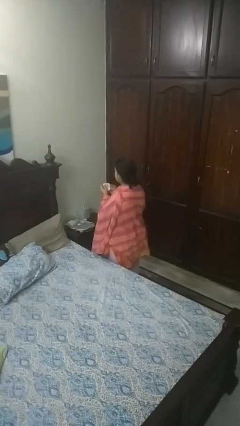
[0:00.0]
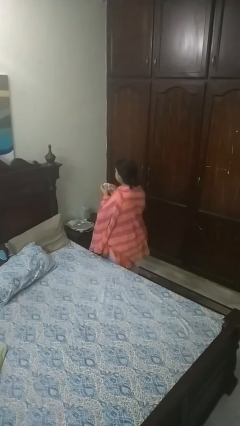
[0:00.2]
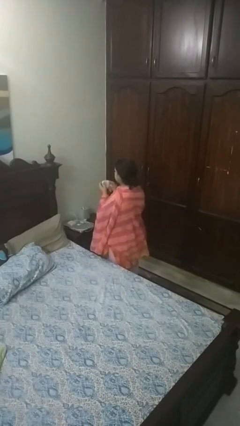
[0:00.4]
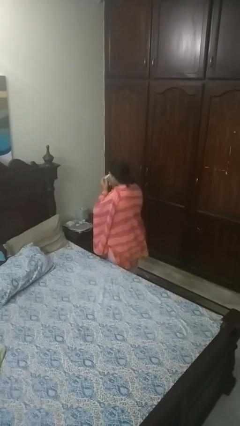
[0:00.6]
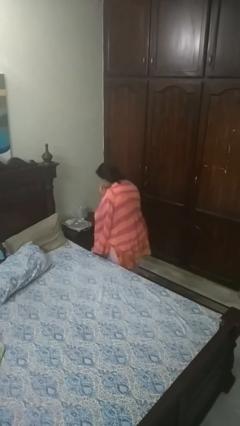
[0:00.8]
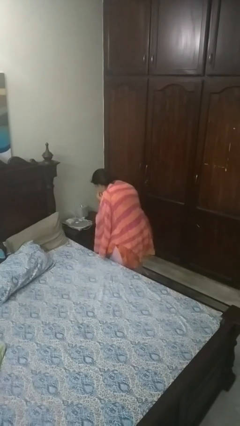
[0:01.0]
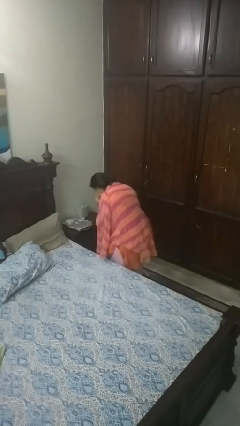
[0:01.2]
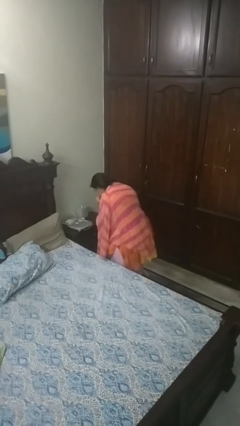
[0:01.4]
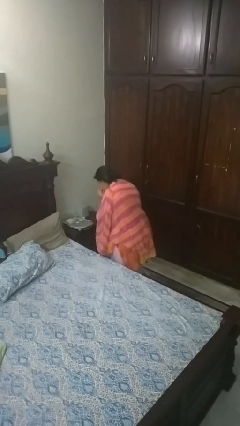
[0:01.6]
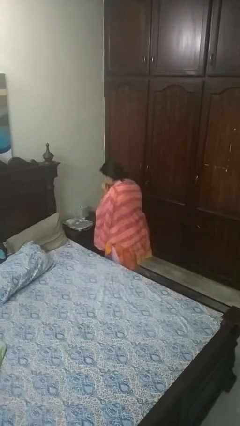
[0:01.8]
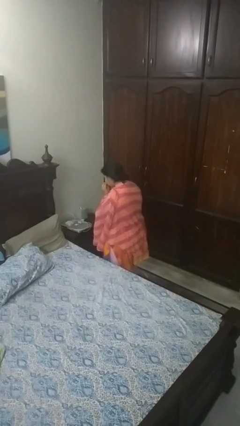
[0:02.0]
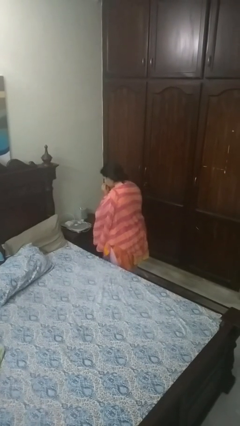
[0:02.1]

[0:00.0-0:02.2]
person blows nose

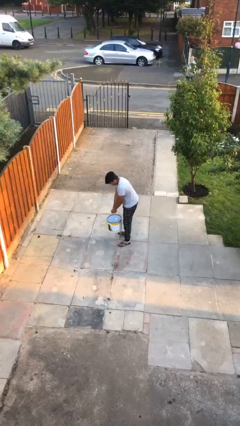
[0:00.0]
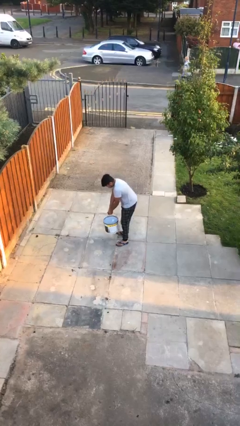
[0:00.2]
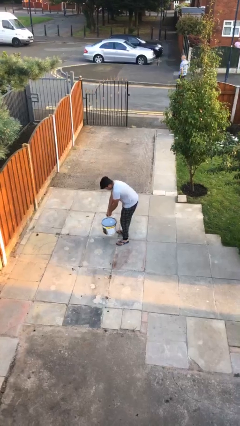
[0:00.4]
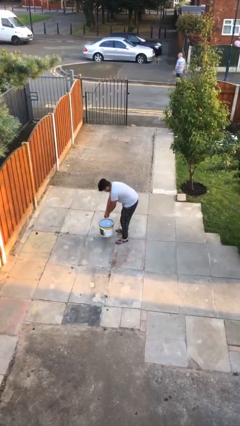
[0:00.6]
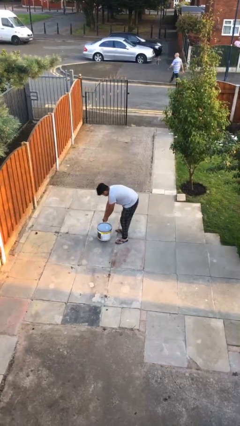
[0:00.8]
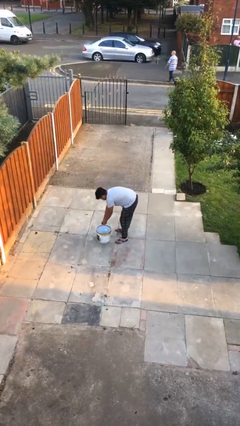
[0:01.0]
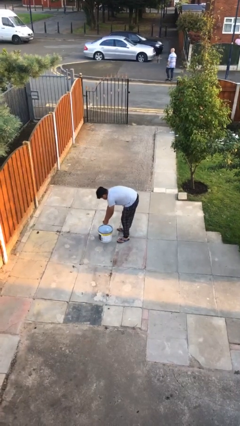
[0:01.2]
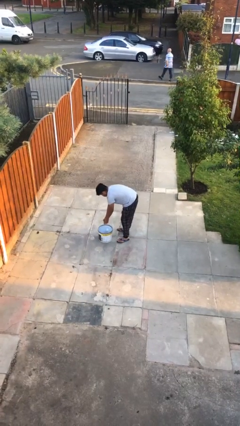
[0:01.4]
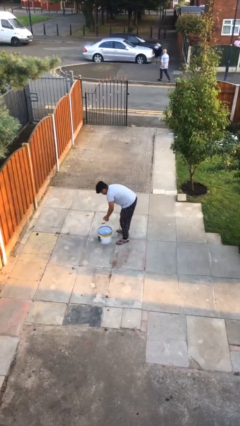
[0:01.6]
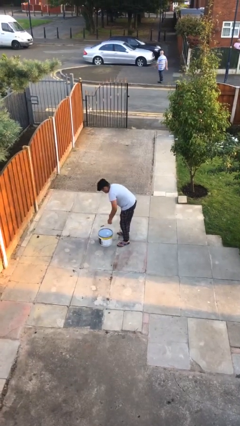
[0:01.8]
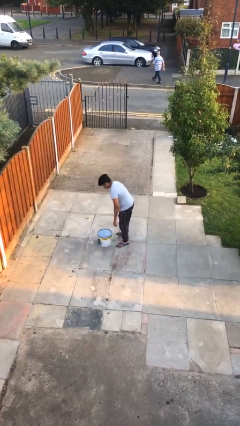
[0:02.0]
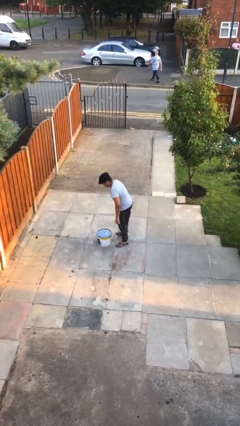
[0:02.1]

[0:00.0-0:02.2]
person puts down object on floor

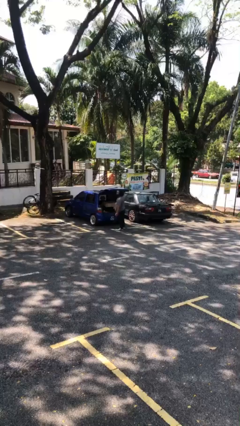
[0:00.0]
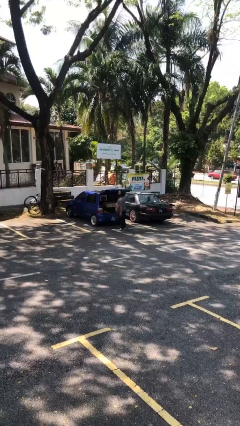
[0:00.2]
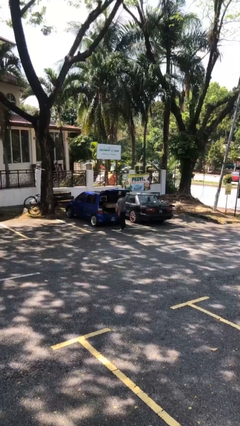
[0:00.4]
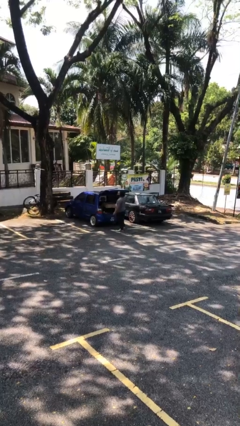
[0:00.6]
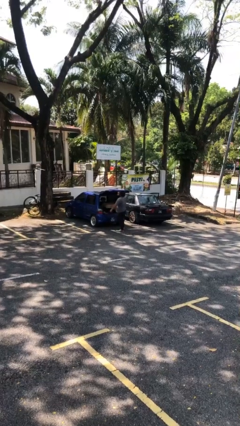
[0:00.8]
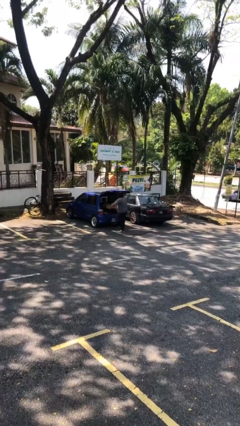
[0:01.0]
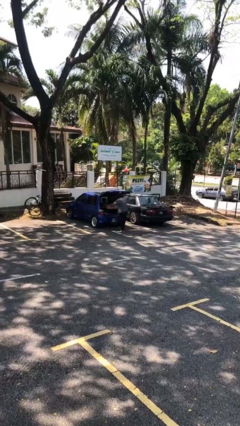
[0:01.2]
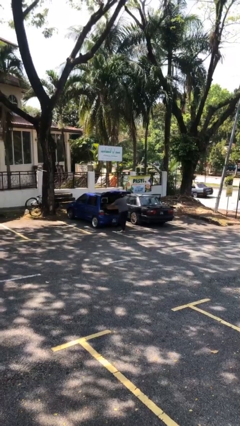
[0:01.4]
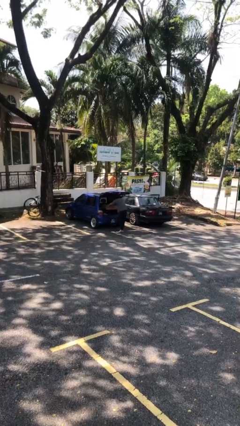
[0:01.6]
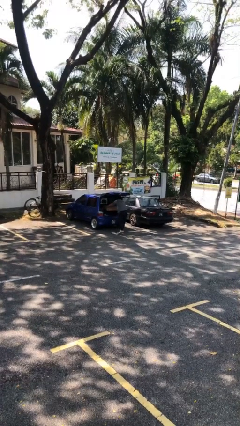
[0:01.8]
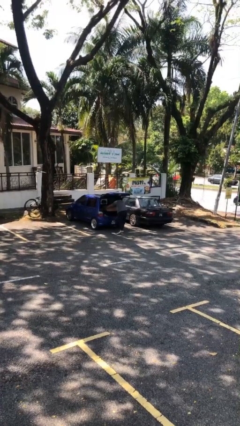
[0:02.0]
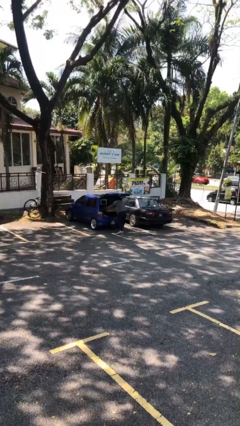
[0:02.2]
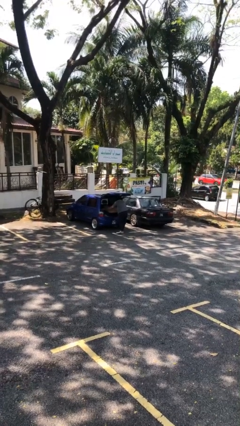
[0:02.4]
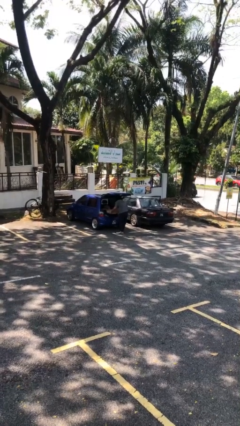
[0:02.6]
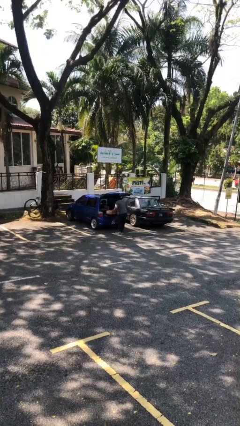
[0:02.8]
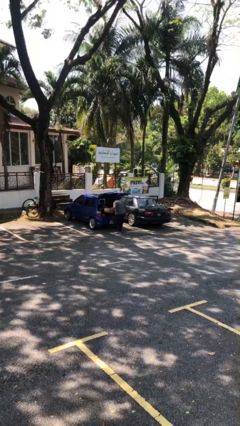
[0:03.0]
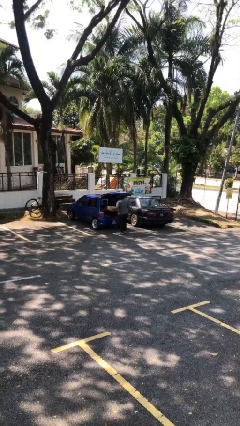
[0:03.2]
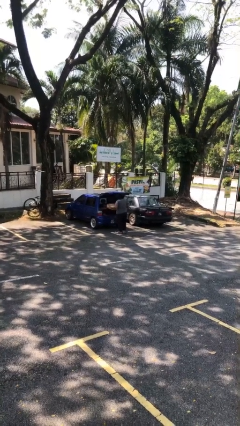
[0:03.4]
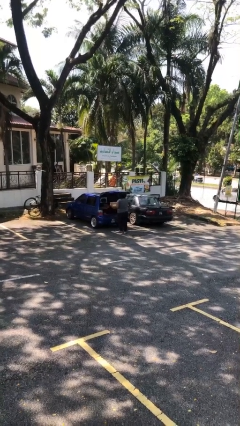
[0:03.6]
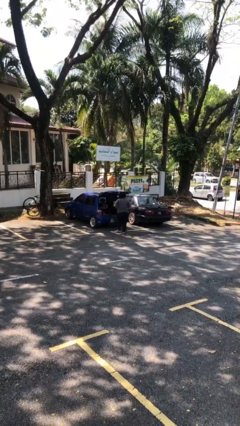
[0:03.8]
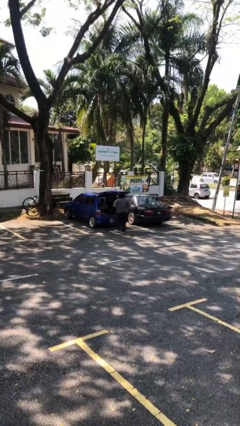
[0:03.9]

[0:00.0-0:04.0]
person unloads car

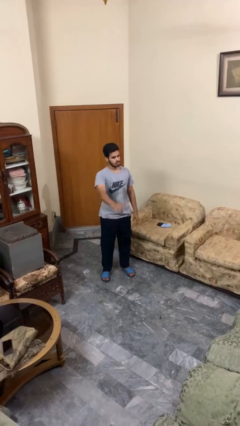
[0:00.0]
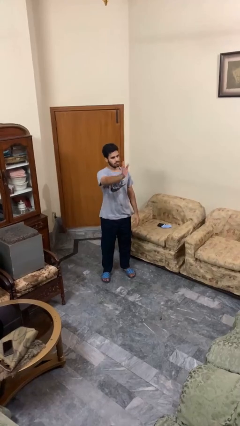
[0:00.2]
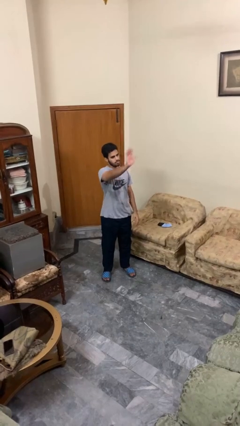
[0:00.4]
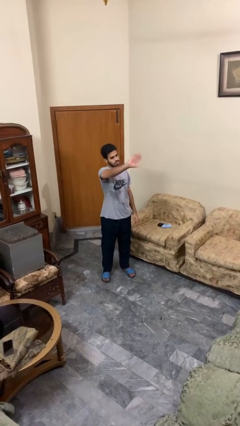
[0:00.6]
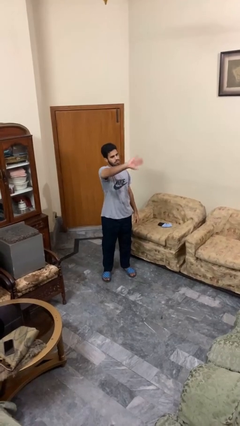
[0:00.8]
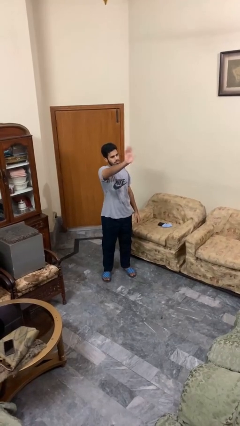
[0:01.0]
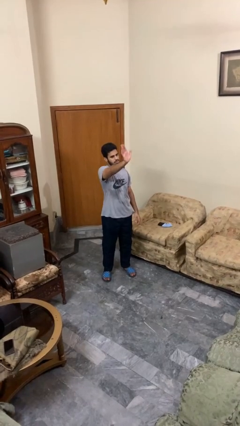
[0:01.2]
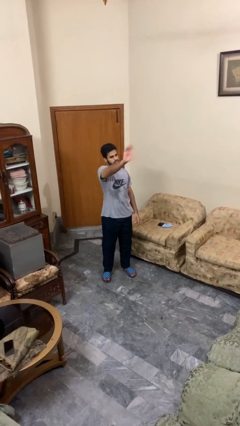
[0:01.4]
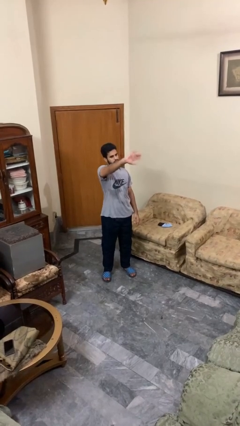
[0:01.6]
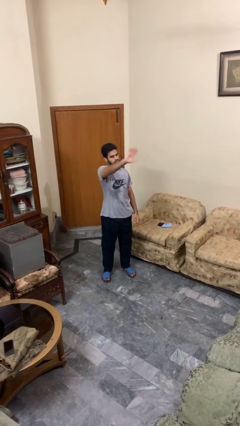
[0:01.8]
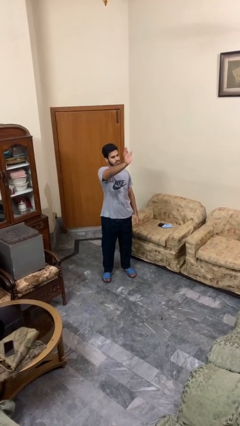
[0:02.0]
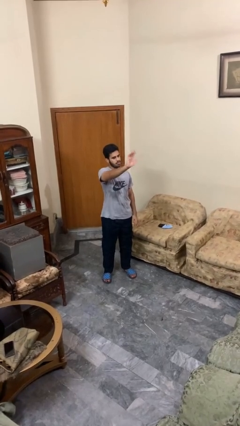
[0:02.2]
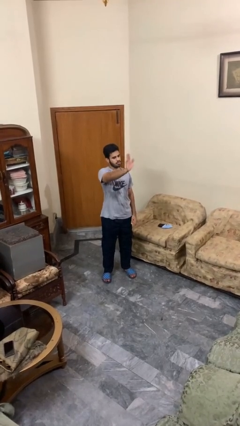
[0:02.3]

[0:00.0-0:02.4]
person waves at person

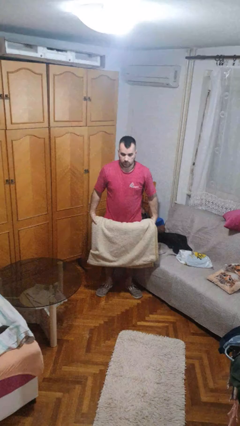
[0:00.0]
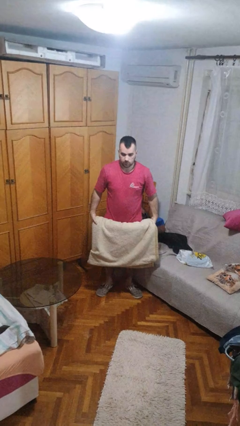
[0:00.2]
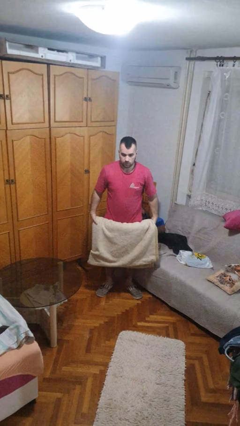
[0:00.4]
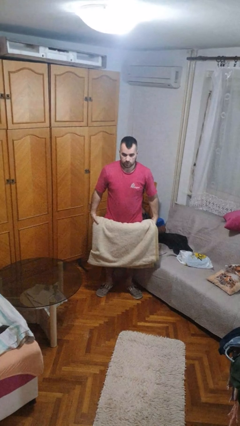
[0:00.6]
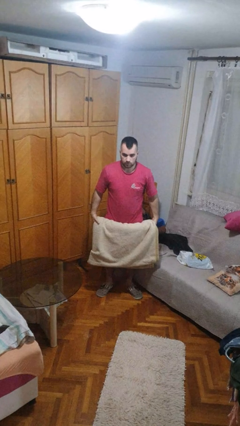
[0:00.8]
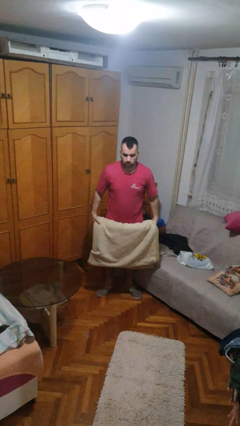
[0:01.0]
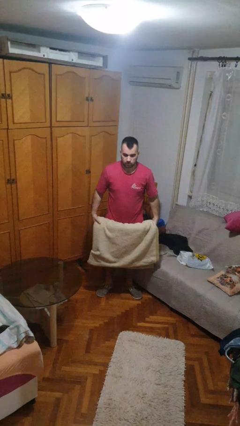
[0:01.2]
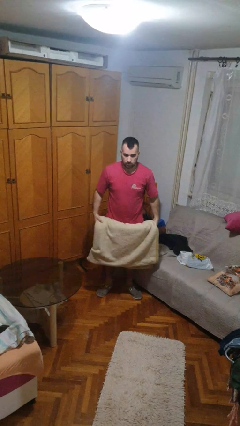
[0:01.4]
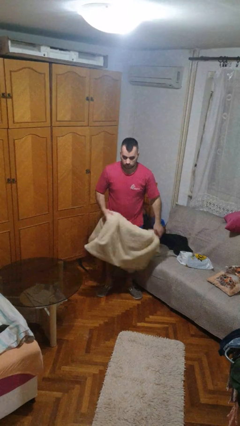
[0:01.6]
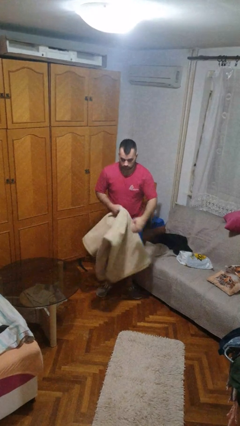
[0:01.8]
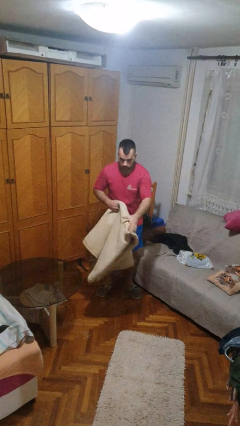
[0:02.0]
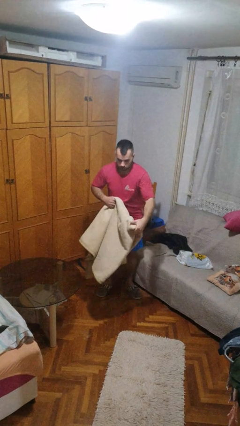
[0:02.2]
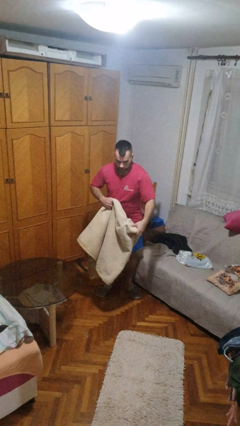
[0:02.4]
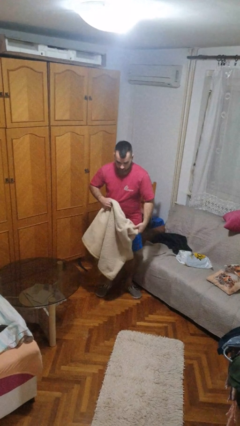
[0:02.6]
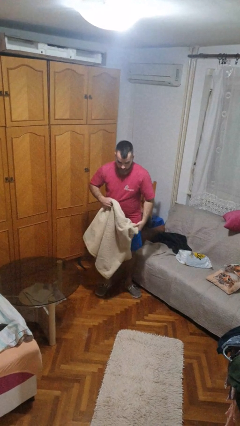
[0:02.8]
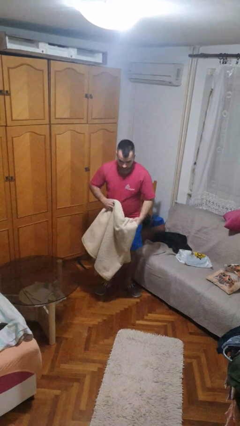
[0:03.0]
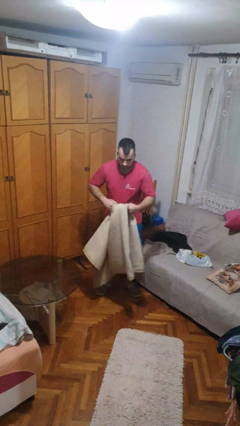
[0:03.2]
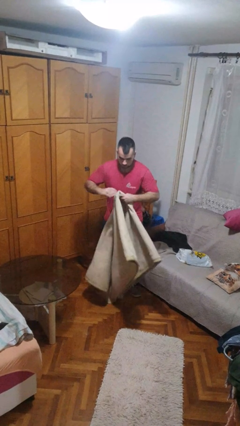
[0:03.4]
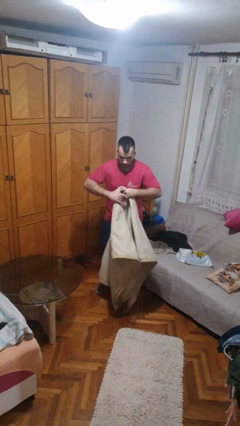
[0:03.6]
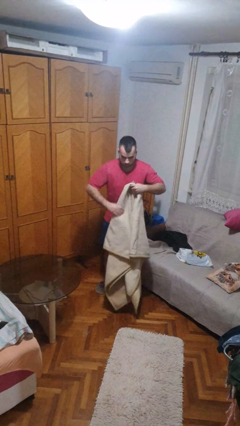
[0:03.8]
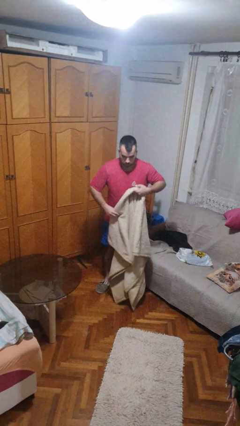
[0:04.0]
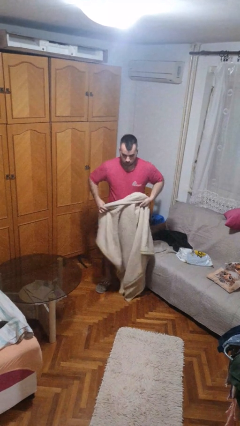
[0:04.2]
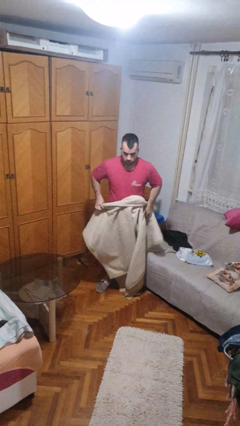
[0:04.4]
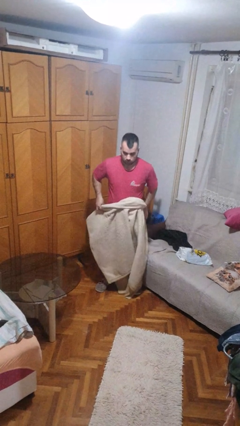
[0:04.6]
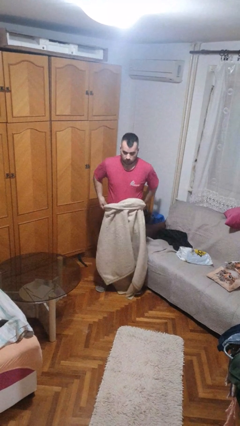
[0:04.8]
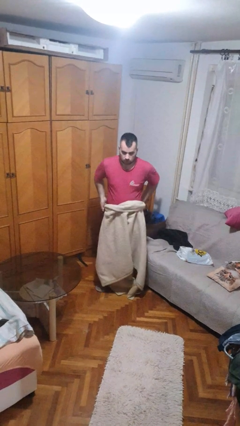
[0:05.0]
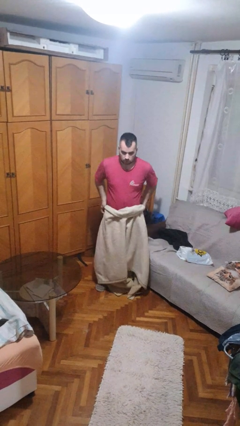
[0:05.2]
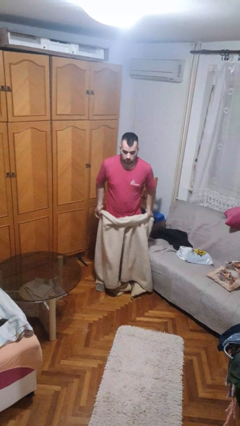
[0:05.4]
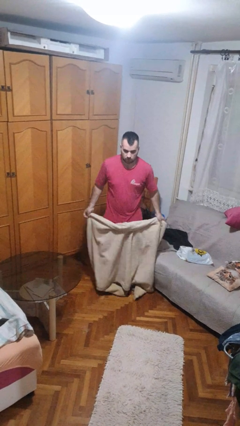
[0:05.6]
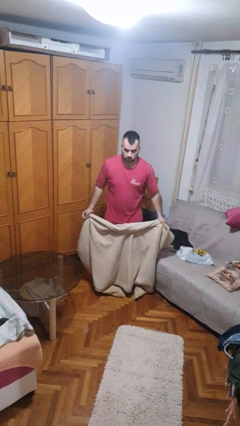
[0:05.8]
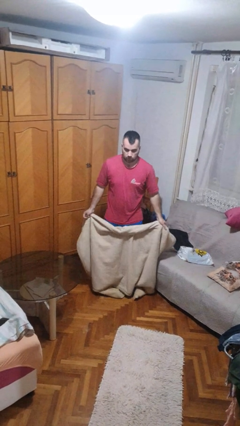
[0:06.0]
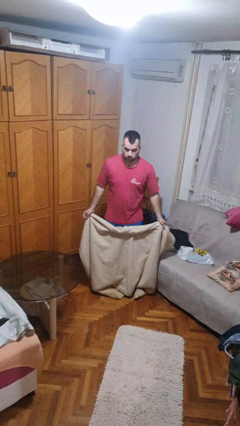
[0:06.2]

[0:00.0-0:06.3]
person unfolds blanket

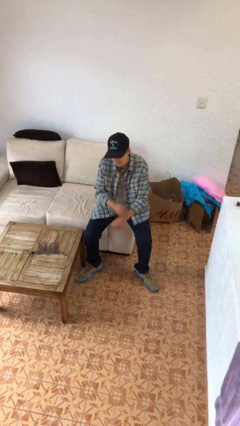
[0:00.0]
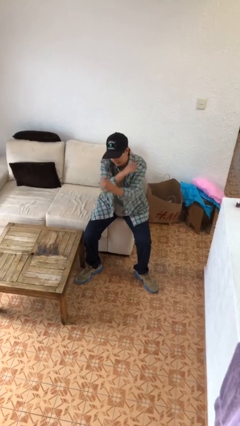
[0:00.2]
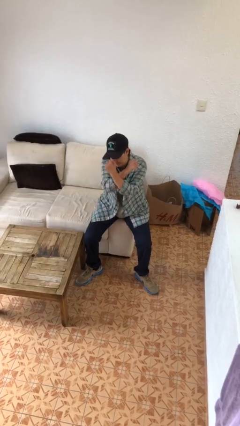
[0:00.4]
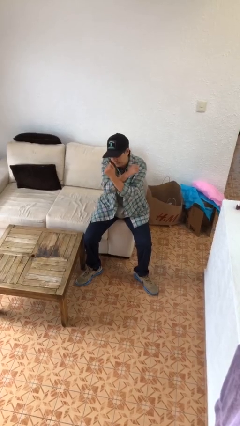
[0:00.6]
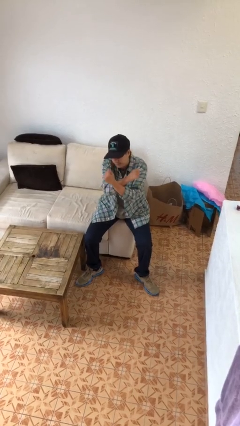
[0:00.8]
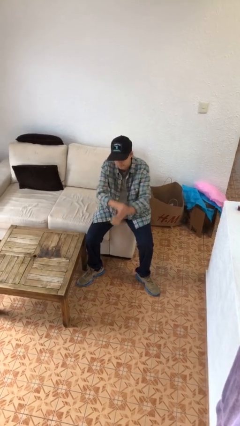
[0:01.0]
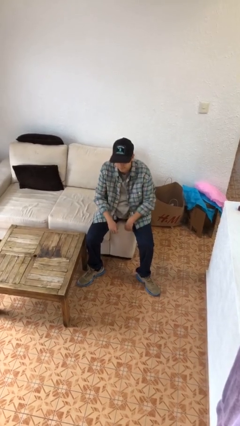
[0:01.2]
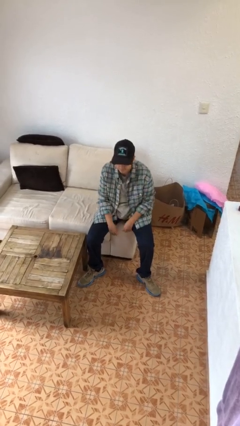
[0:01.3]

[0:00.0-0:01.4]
person gestures arms x
